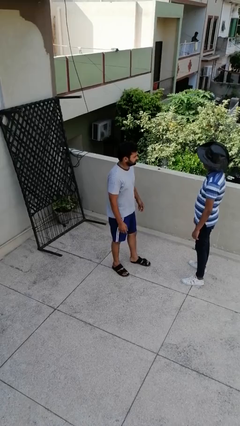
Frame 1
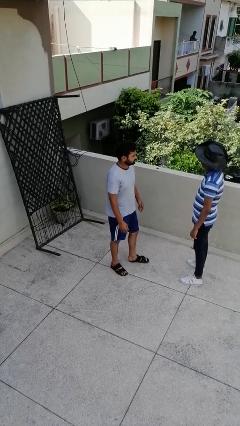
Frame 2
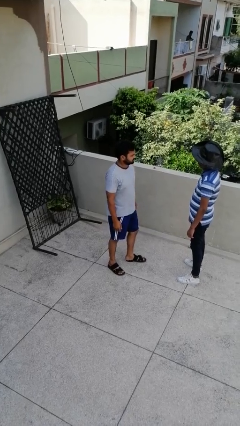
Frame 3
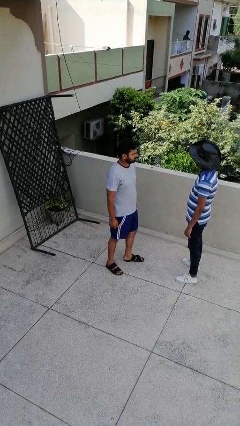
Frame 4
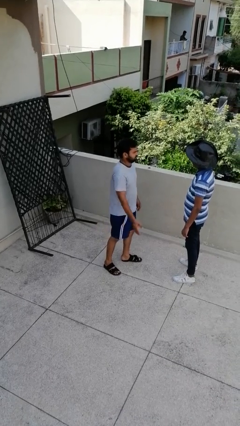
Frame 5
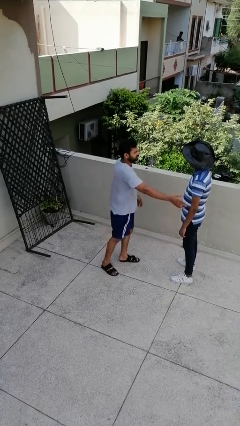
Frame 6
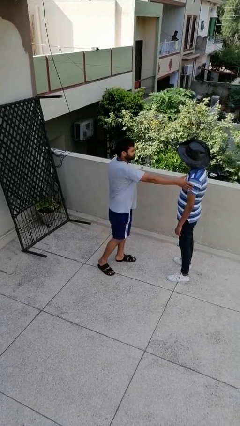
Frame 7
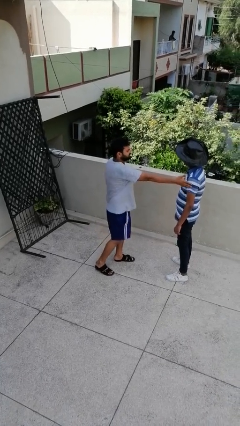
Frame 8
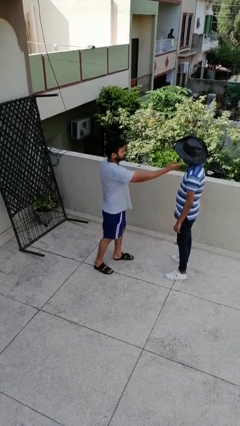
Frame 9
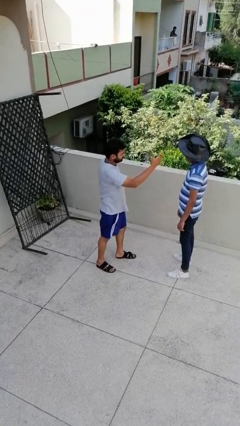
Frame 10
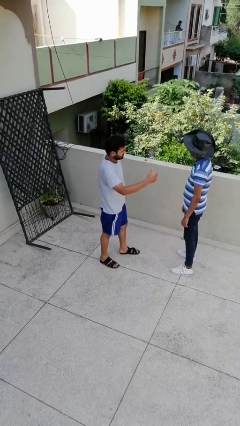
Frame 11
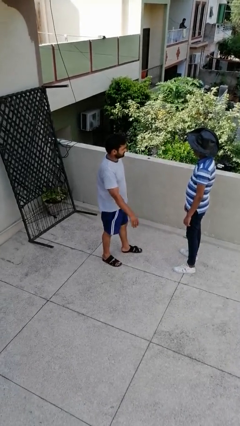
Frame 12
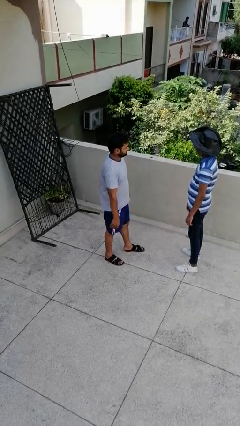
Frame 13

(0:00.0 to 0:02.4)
person shoves person

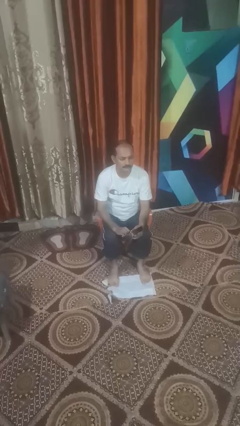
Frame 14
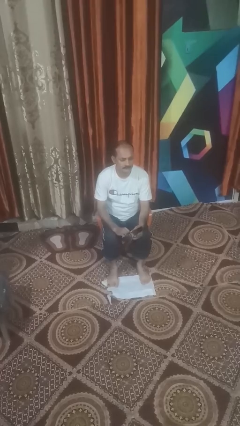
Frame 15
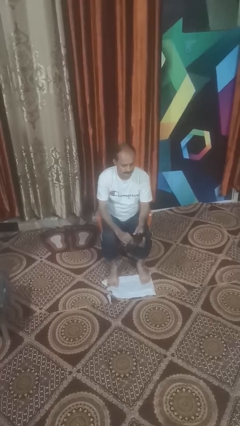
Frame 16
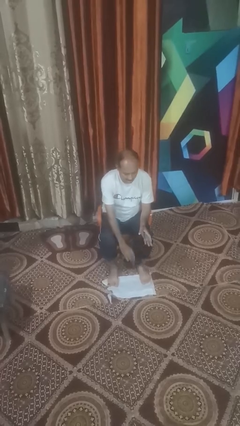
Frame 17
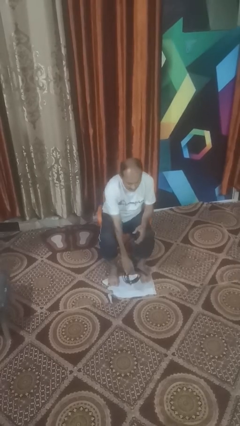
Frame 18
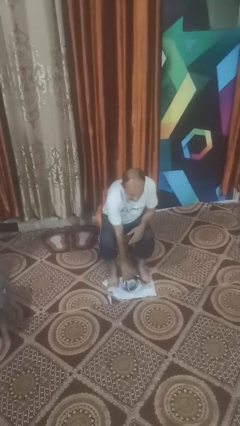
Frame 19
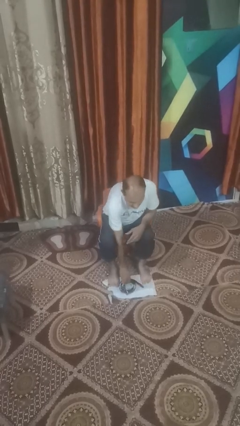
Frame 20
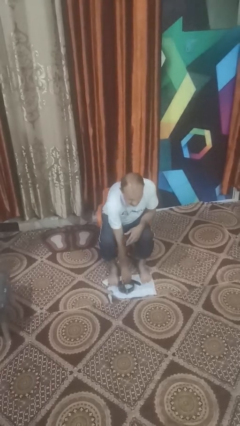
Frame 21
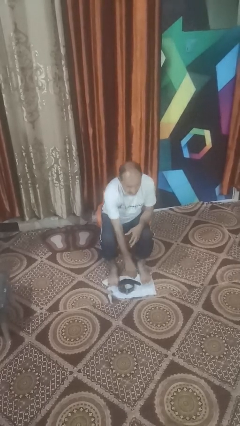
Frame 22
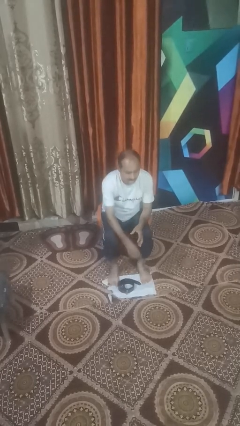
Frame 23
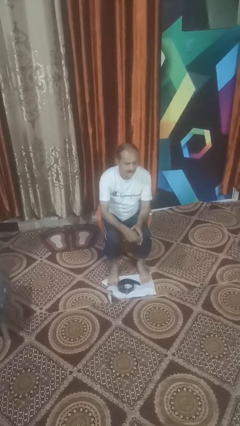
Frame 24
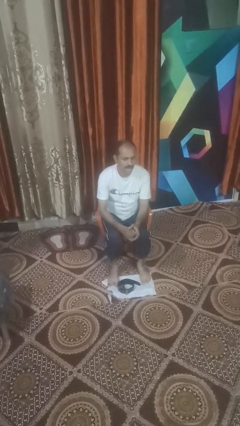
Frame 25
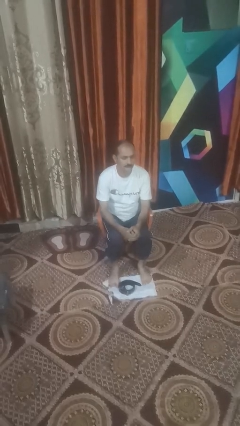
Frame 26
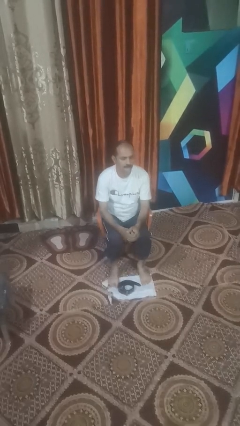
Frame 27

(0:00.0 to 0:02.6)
person takes off belt

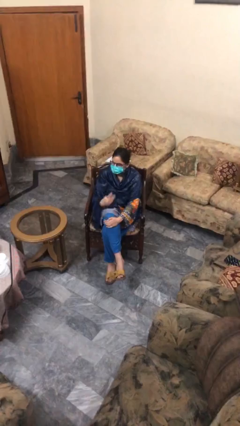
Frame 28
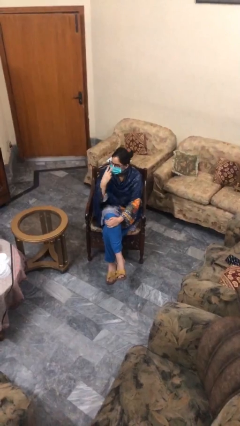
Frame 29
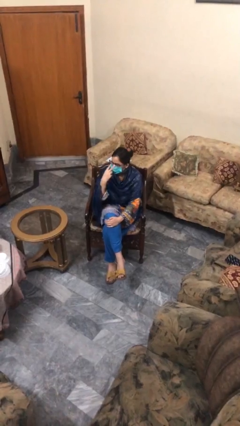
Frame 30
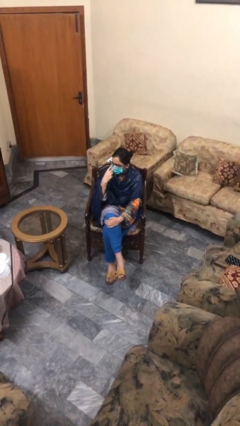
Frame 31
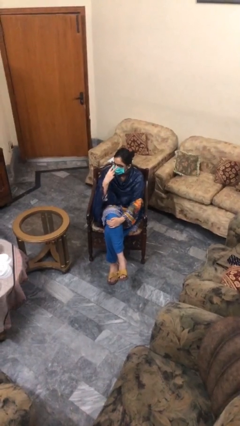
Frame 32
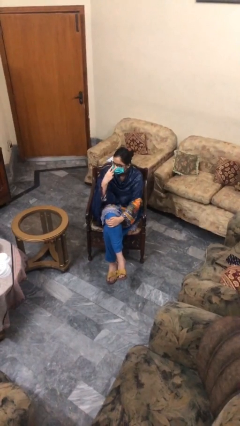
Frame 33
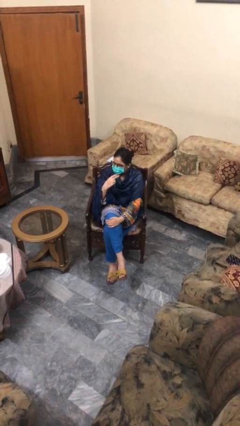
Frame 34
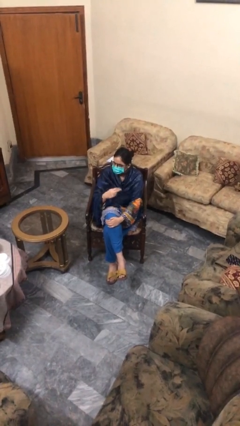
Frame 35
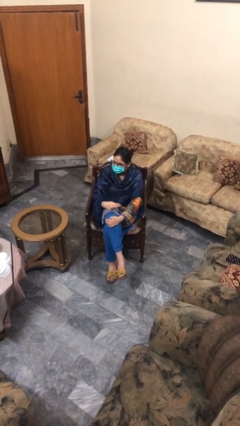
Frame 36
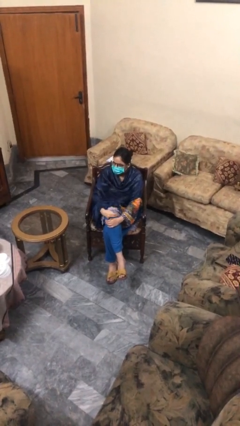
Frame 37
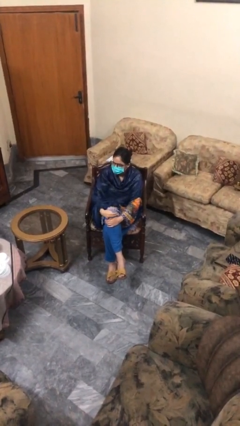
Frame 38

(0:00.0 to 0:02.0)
person gestures watch closely

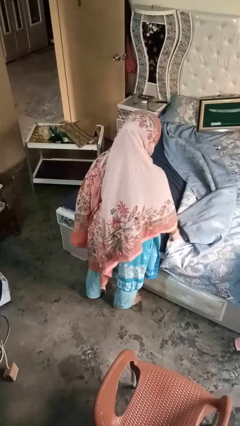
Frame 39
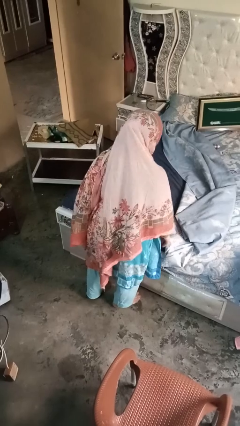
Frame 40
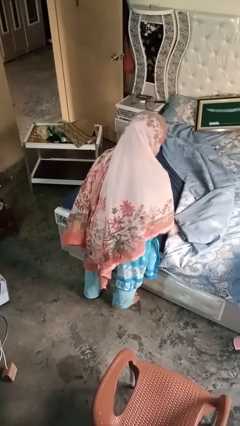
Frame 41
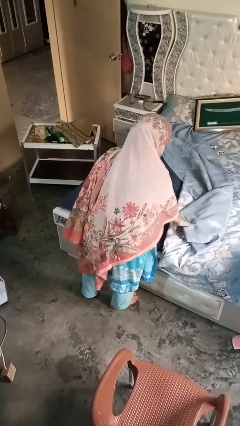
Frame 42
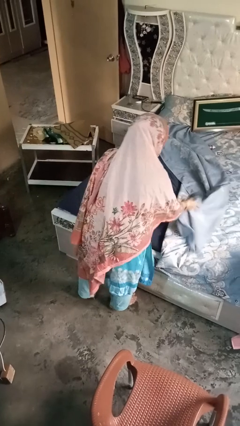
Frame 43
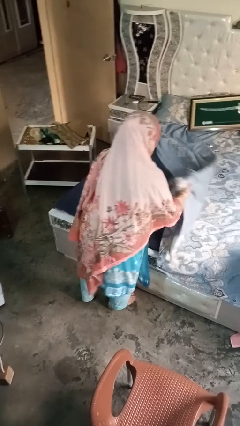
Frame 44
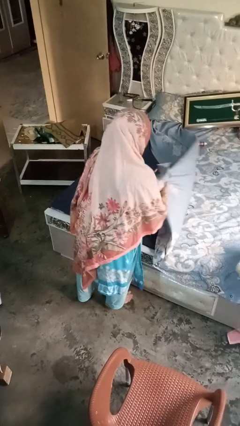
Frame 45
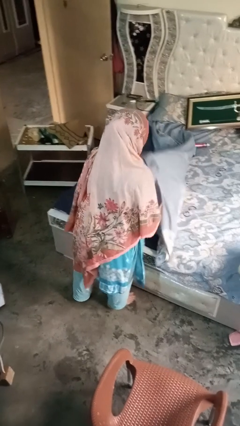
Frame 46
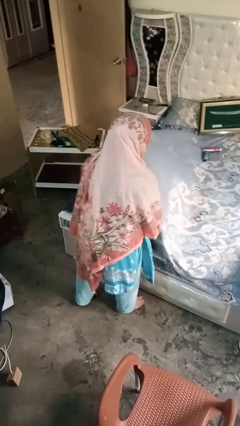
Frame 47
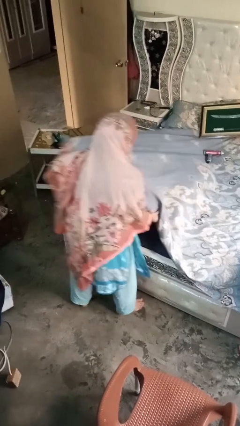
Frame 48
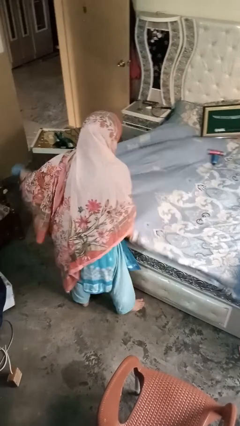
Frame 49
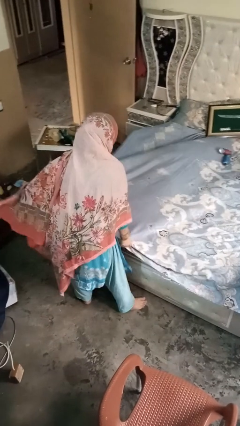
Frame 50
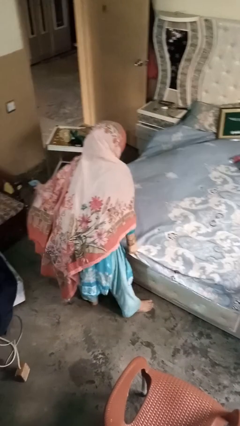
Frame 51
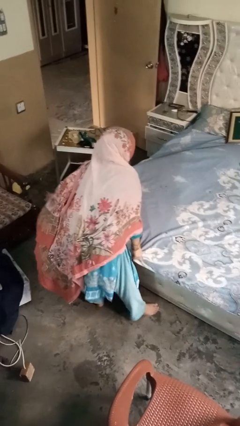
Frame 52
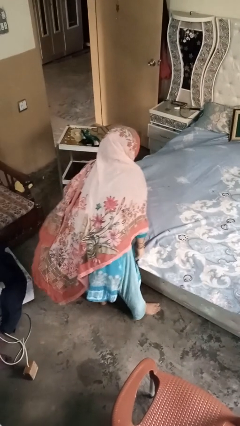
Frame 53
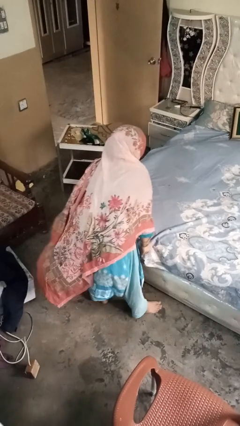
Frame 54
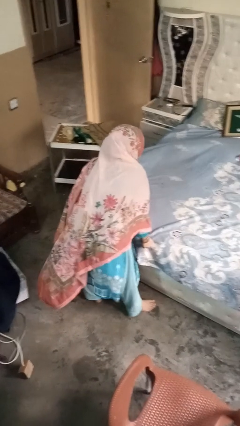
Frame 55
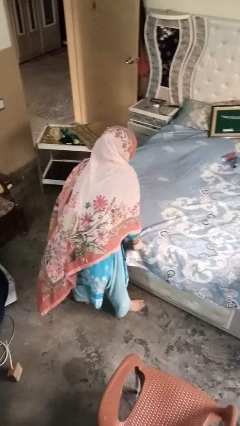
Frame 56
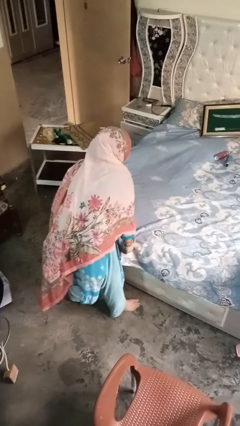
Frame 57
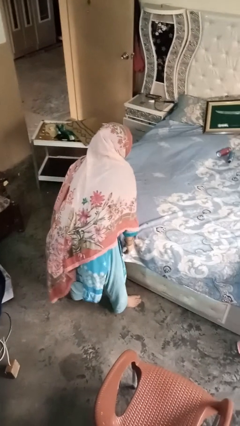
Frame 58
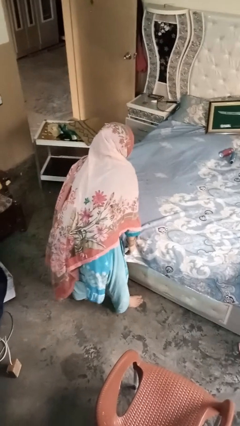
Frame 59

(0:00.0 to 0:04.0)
person makes bed

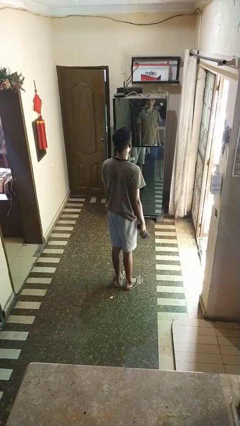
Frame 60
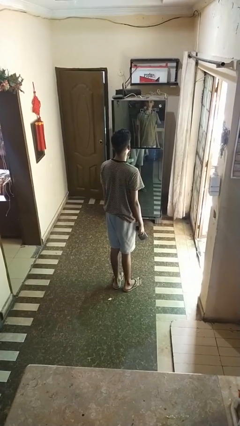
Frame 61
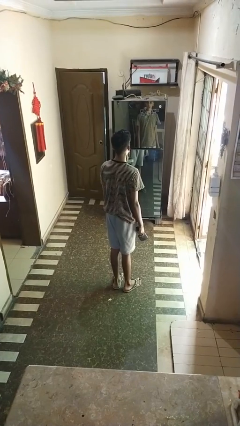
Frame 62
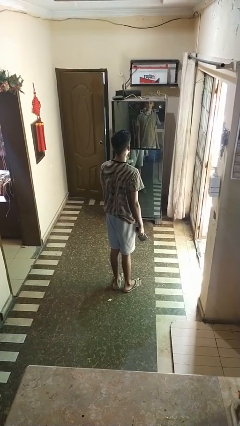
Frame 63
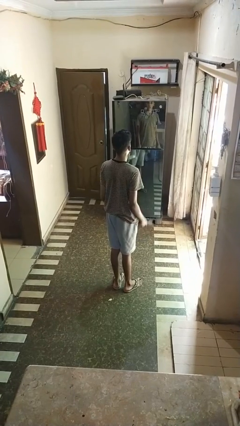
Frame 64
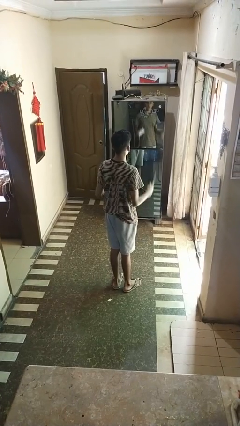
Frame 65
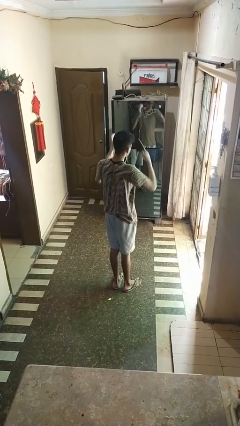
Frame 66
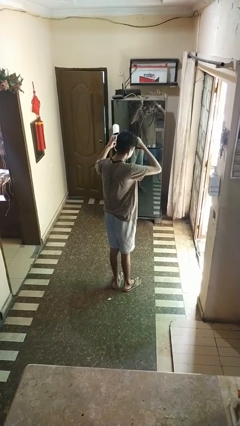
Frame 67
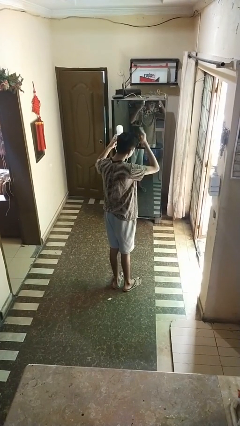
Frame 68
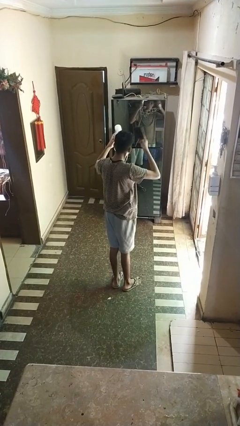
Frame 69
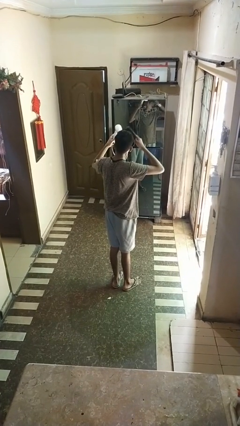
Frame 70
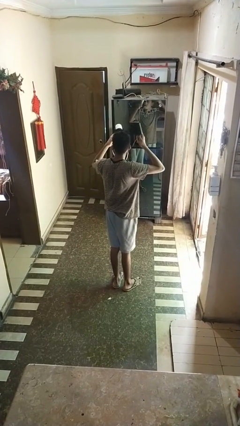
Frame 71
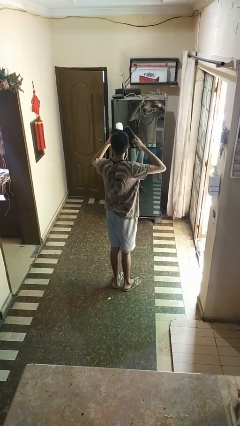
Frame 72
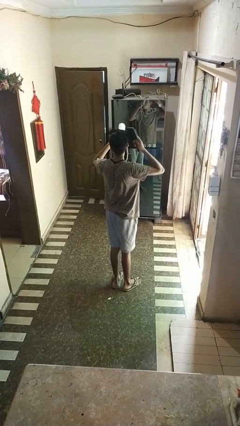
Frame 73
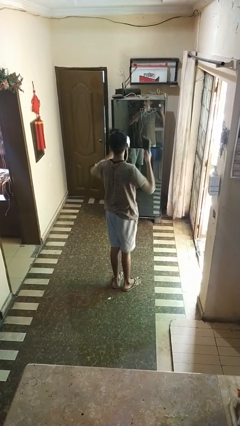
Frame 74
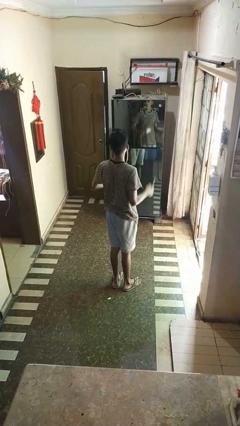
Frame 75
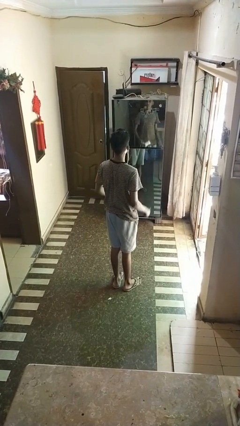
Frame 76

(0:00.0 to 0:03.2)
person dries hair with hairdryer

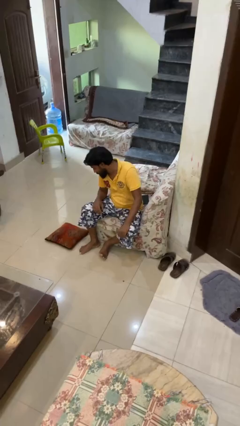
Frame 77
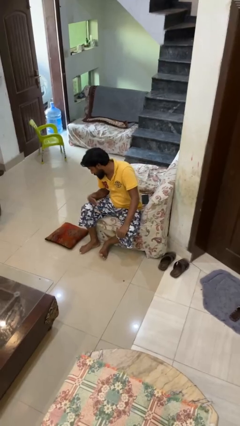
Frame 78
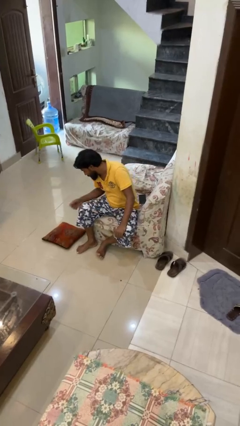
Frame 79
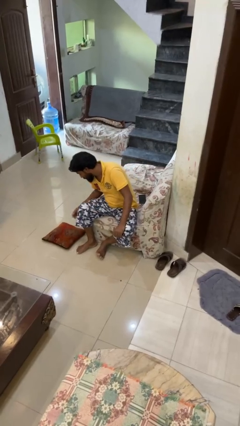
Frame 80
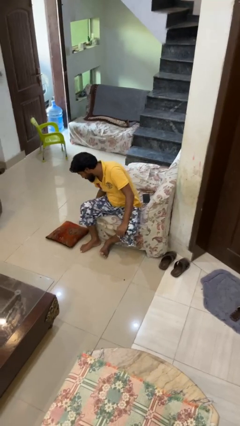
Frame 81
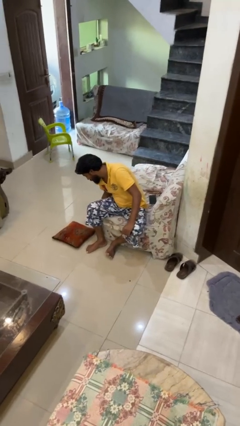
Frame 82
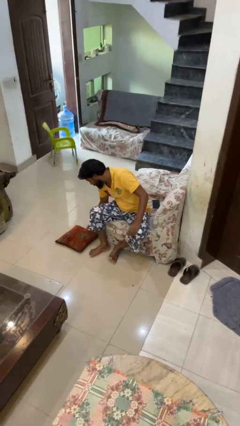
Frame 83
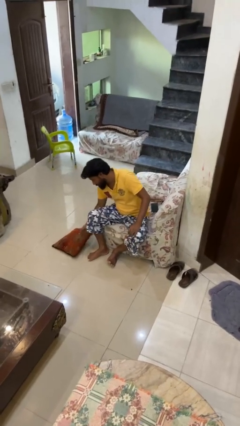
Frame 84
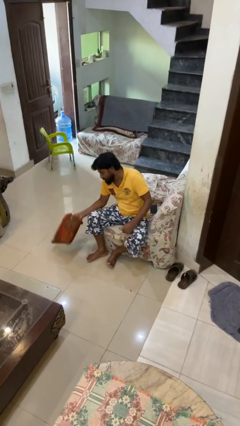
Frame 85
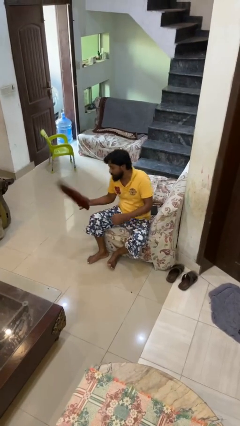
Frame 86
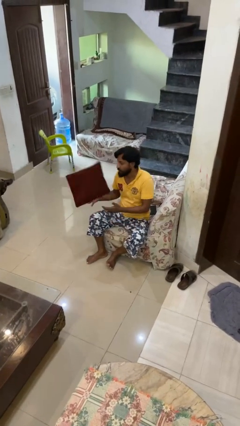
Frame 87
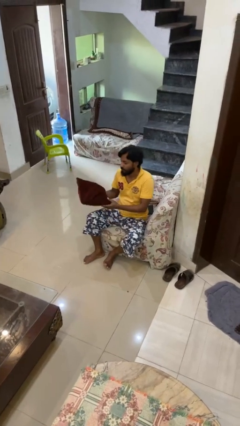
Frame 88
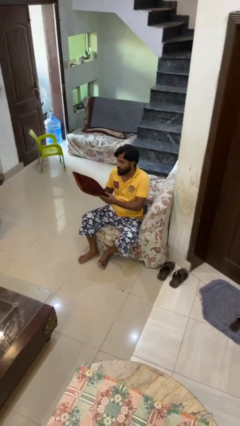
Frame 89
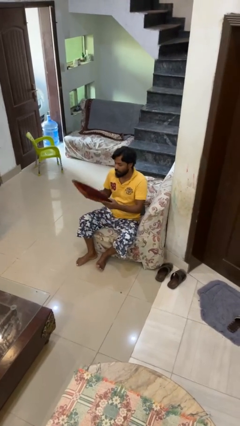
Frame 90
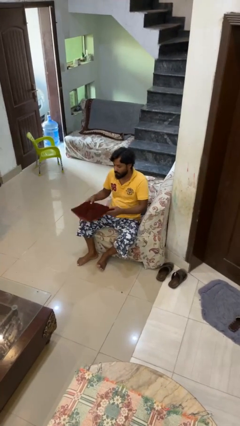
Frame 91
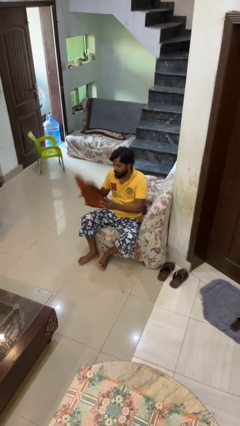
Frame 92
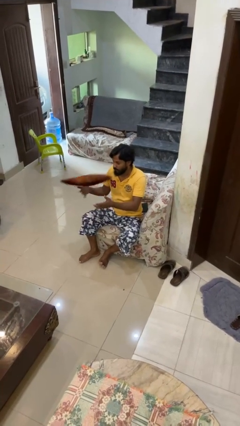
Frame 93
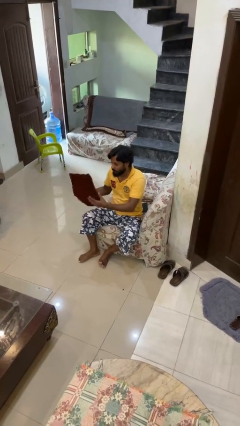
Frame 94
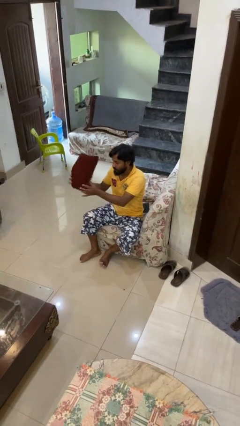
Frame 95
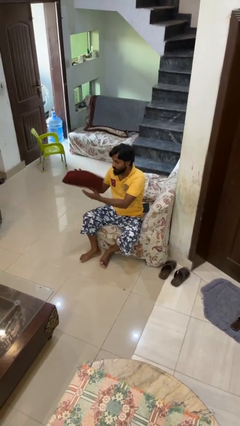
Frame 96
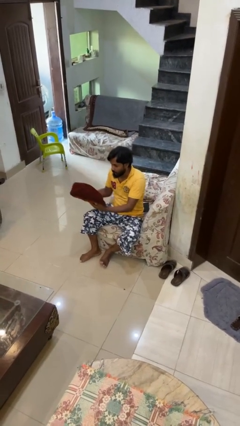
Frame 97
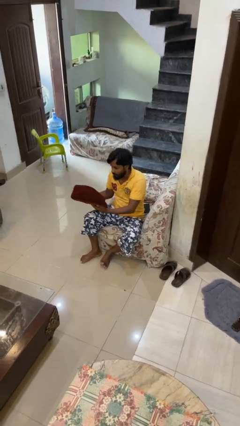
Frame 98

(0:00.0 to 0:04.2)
person drops object
